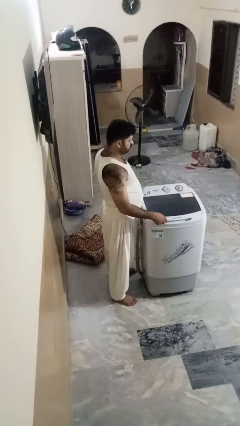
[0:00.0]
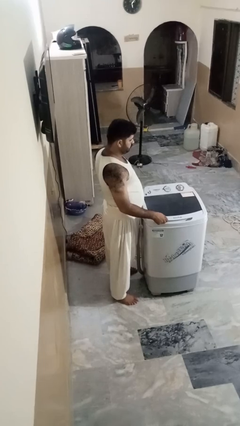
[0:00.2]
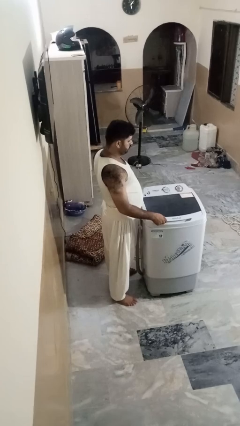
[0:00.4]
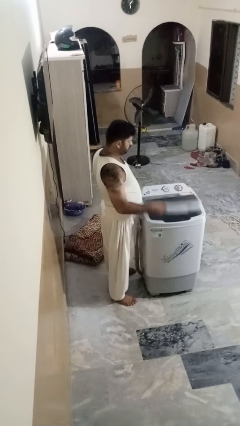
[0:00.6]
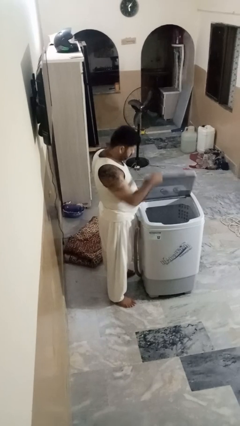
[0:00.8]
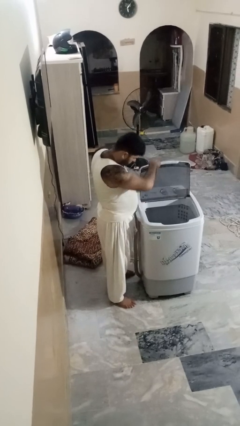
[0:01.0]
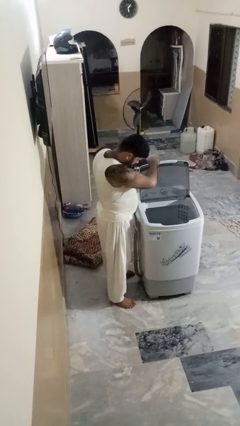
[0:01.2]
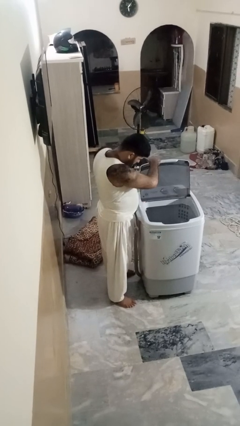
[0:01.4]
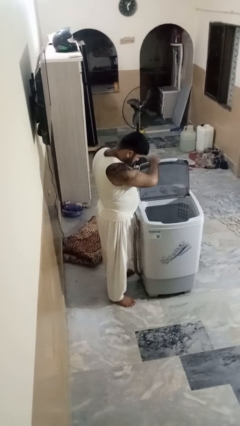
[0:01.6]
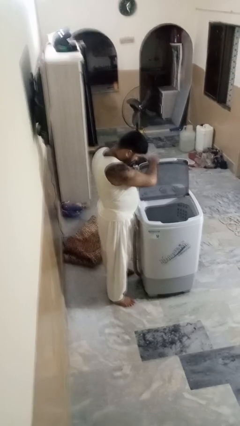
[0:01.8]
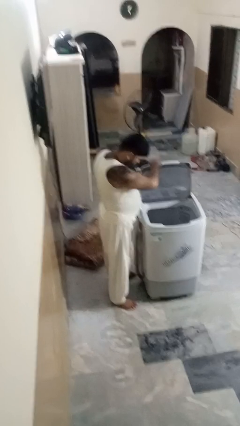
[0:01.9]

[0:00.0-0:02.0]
person opens clothes washer

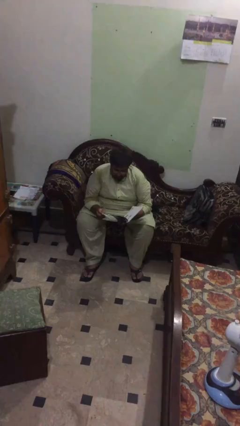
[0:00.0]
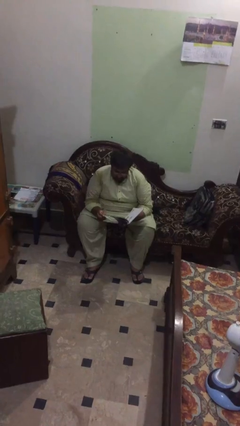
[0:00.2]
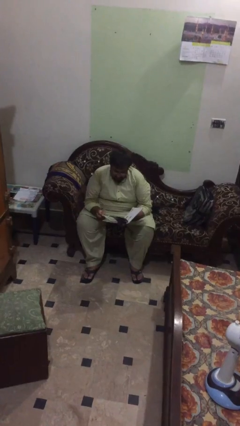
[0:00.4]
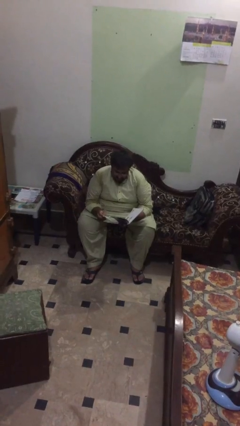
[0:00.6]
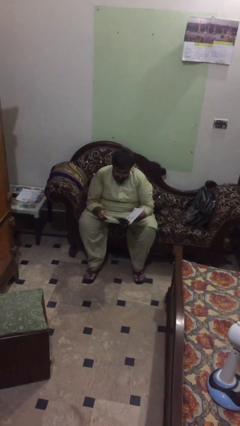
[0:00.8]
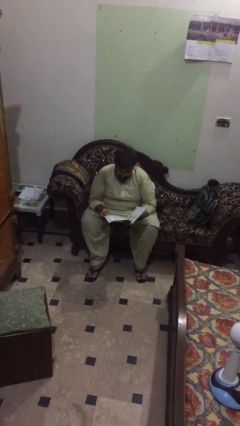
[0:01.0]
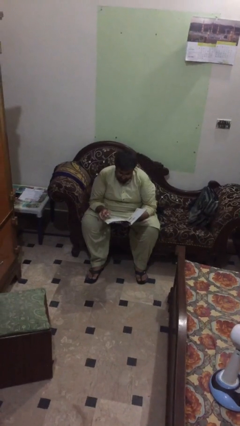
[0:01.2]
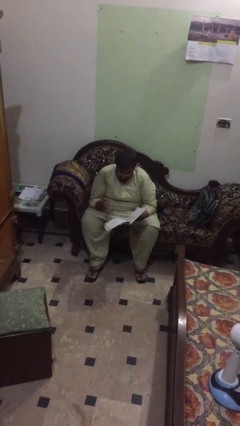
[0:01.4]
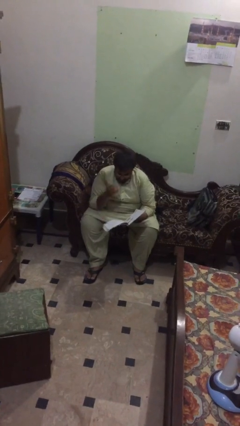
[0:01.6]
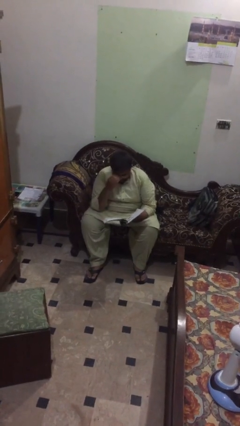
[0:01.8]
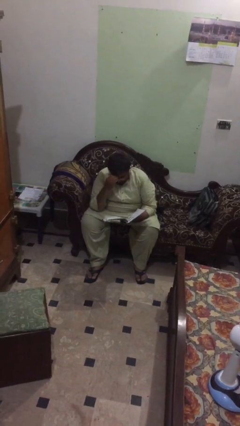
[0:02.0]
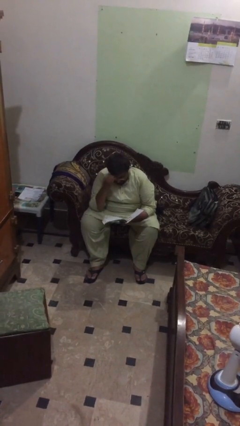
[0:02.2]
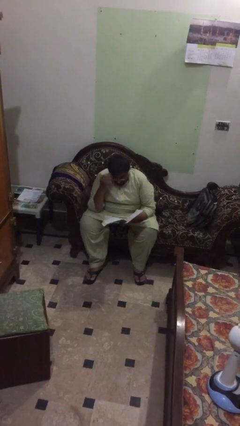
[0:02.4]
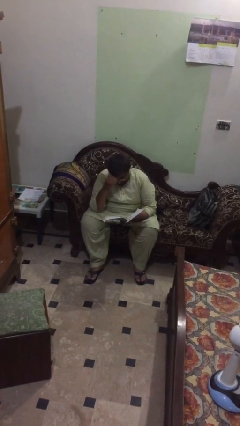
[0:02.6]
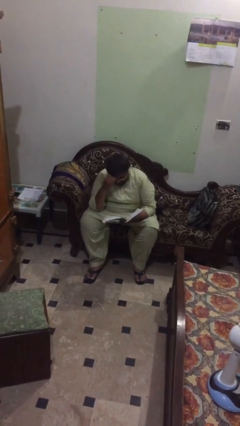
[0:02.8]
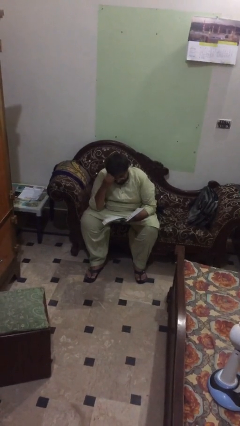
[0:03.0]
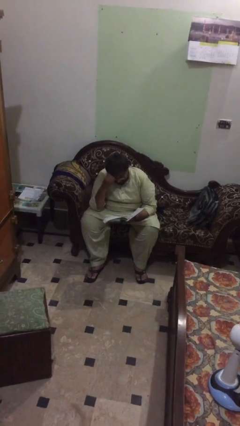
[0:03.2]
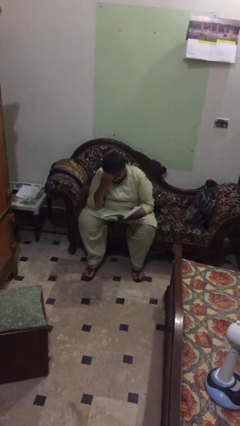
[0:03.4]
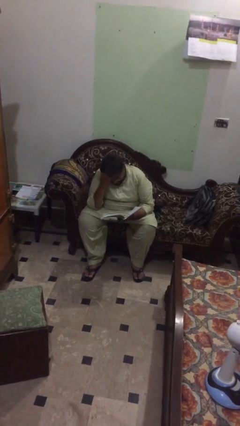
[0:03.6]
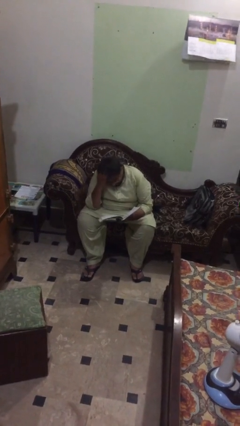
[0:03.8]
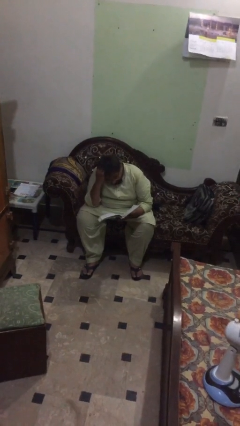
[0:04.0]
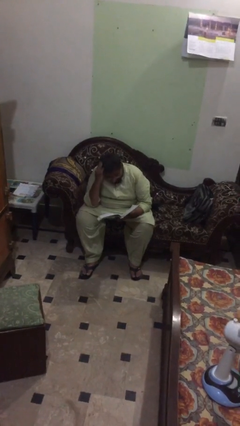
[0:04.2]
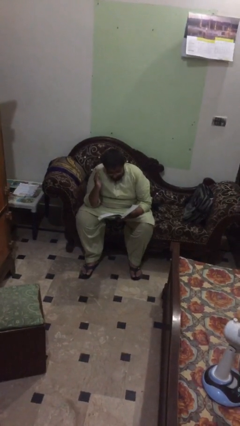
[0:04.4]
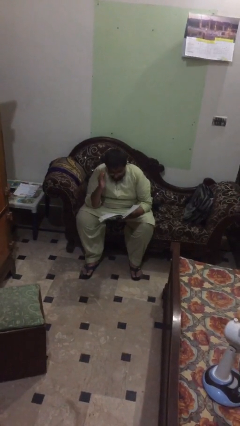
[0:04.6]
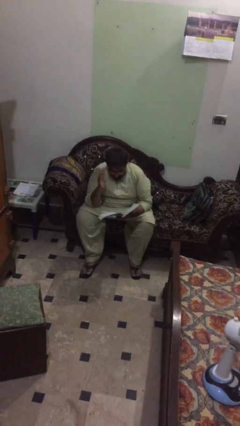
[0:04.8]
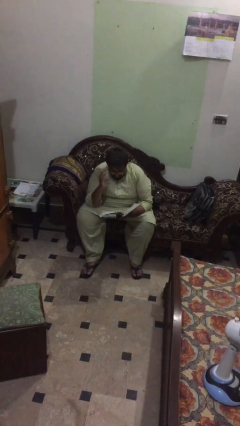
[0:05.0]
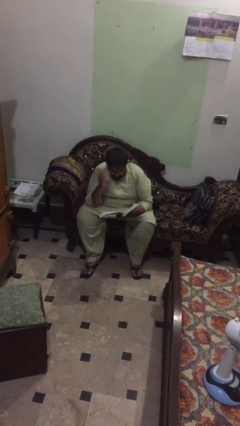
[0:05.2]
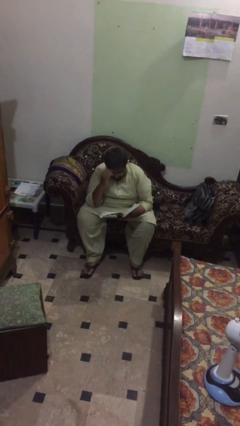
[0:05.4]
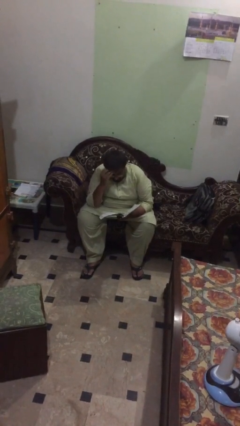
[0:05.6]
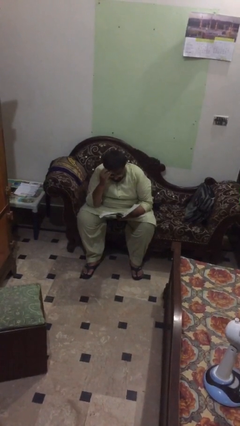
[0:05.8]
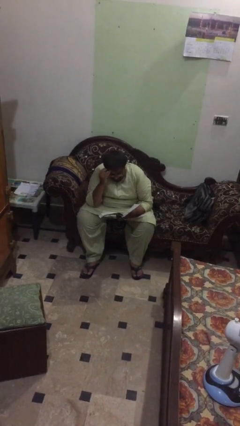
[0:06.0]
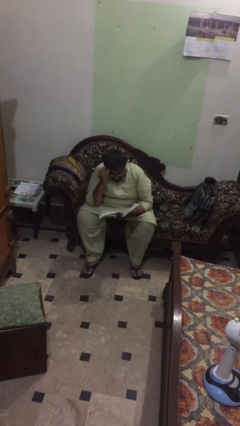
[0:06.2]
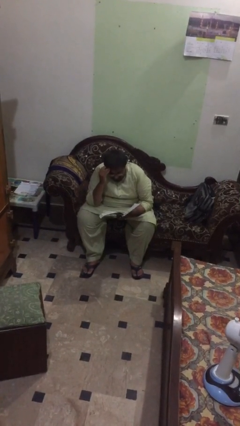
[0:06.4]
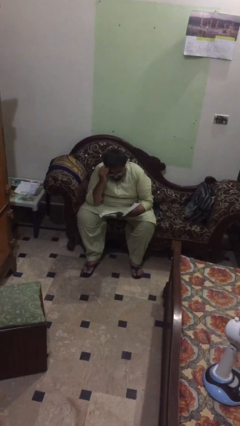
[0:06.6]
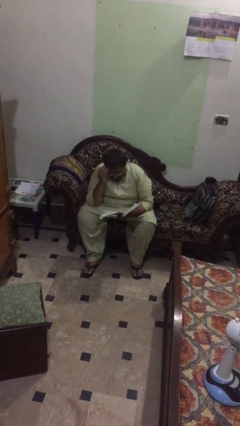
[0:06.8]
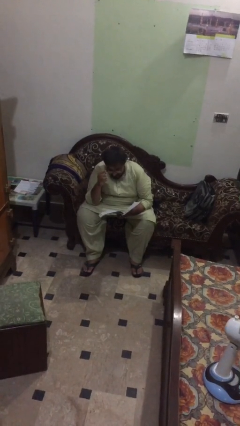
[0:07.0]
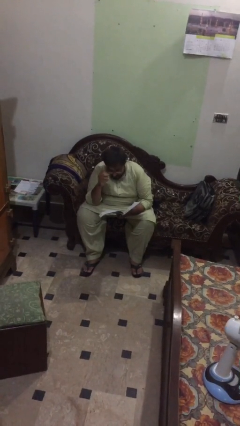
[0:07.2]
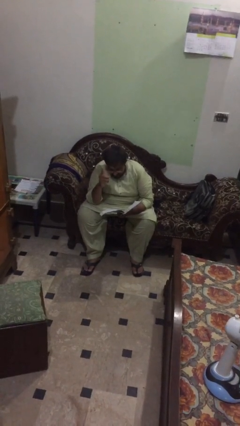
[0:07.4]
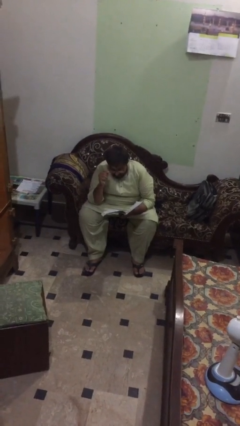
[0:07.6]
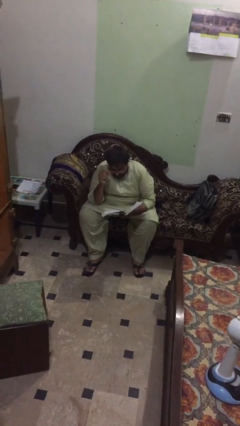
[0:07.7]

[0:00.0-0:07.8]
person reads document

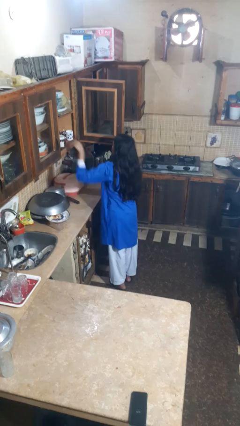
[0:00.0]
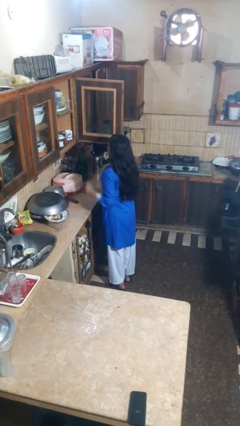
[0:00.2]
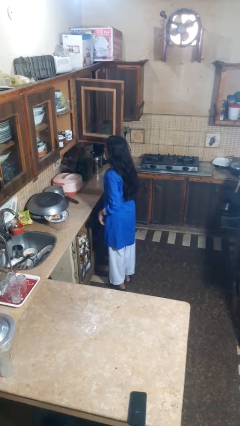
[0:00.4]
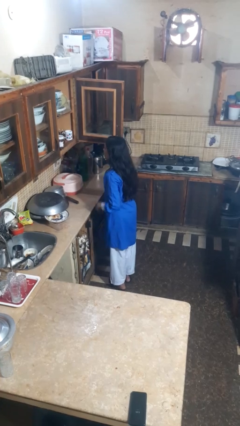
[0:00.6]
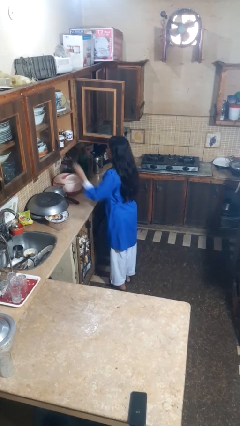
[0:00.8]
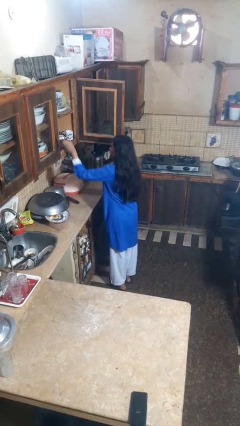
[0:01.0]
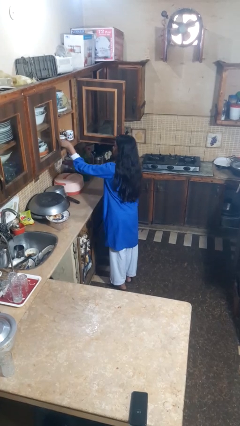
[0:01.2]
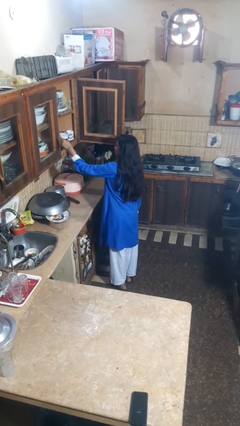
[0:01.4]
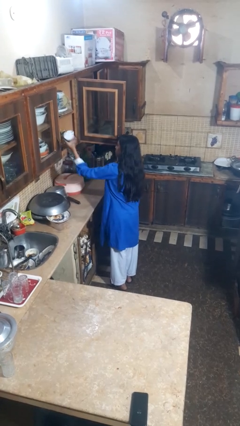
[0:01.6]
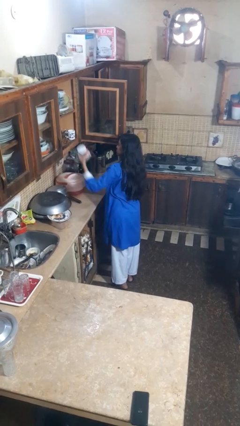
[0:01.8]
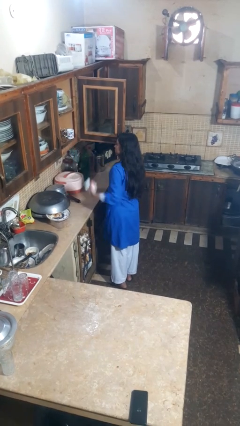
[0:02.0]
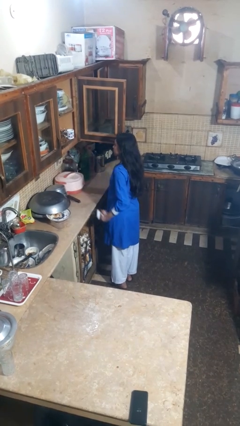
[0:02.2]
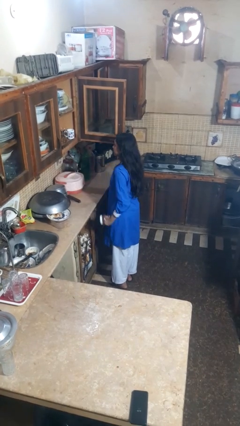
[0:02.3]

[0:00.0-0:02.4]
person takes object from cabinet

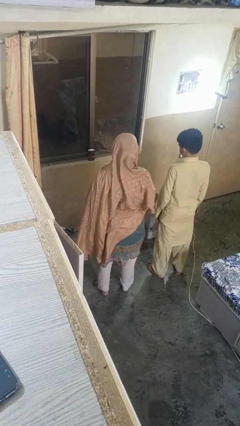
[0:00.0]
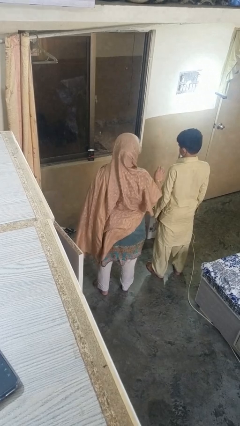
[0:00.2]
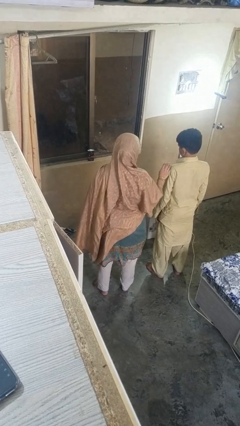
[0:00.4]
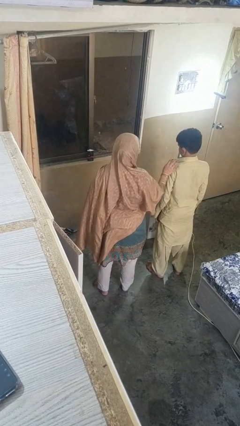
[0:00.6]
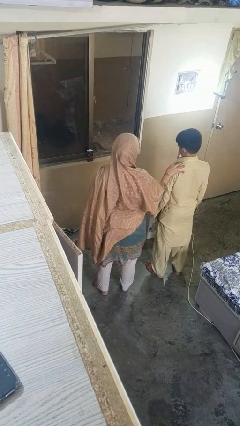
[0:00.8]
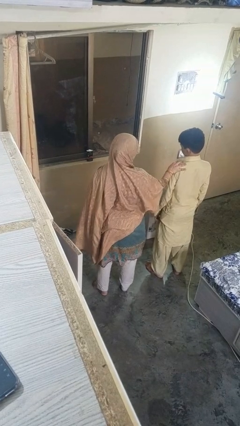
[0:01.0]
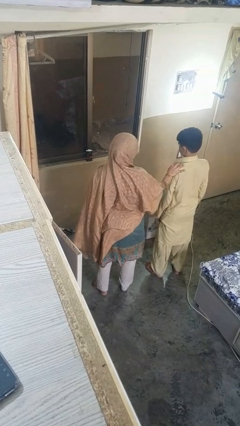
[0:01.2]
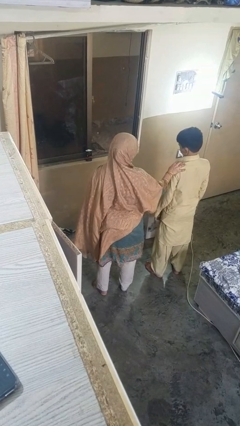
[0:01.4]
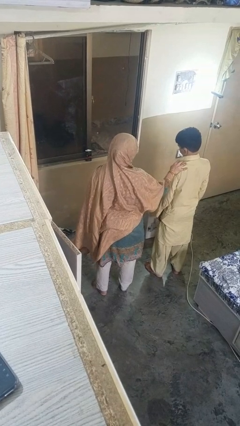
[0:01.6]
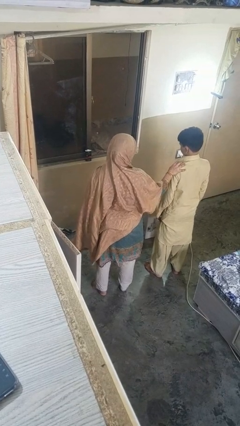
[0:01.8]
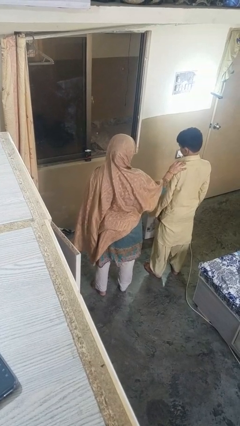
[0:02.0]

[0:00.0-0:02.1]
person shoves person

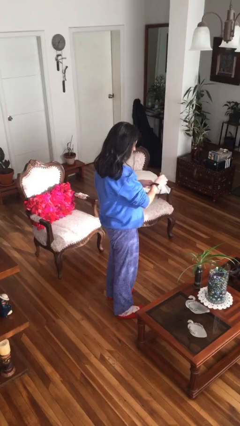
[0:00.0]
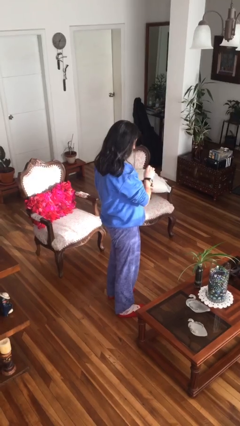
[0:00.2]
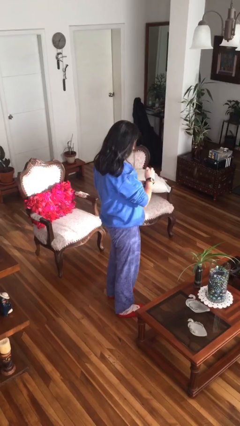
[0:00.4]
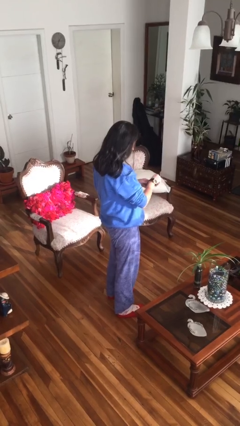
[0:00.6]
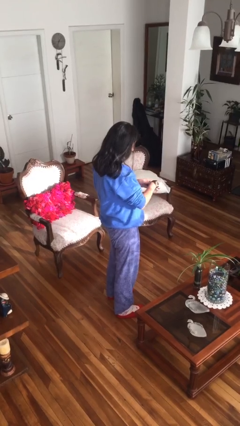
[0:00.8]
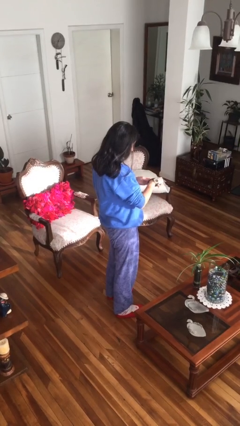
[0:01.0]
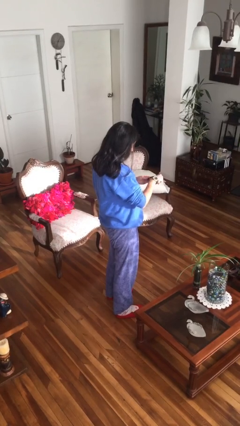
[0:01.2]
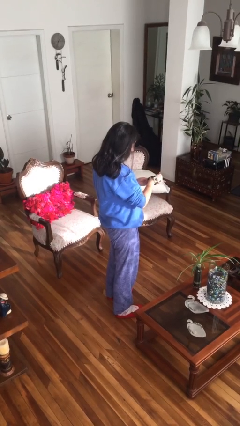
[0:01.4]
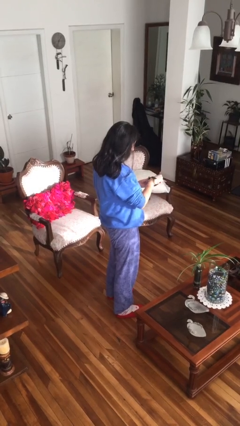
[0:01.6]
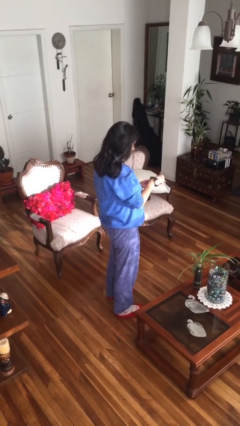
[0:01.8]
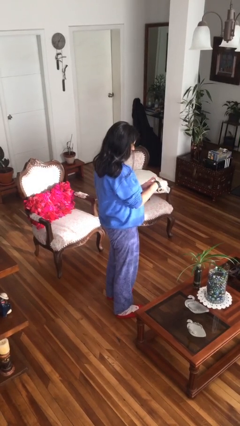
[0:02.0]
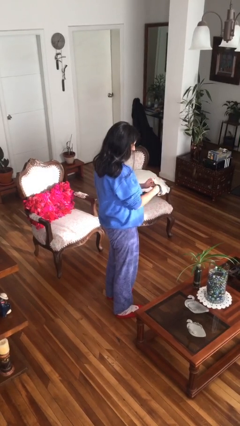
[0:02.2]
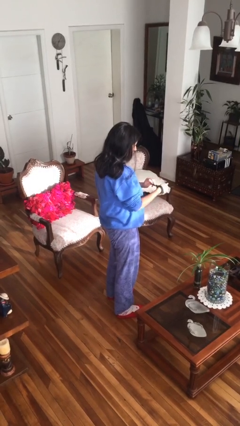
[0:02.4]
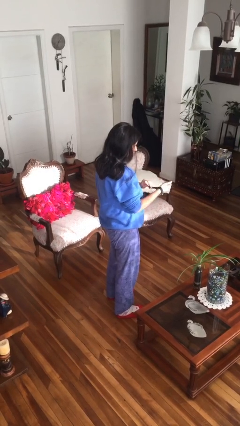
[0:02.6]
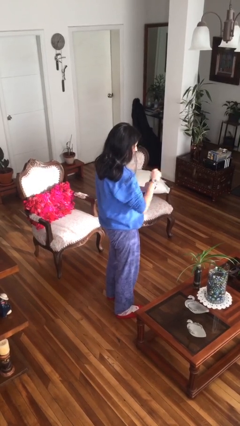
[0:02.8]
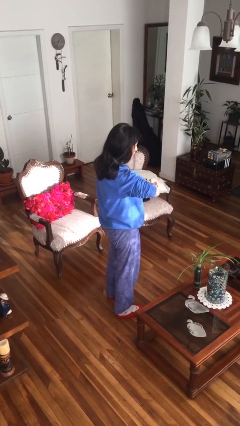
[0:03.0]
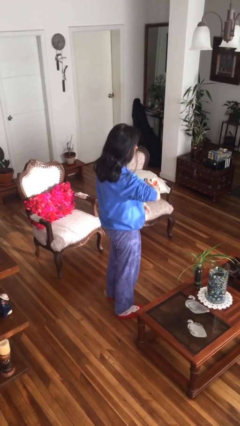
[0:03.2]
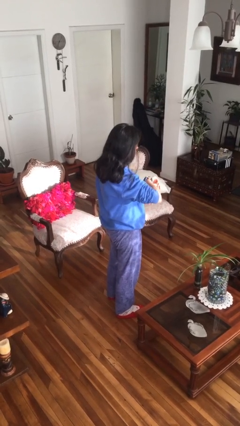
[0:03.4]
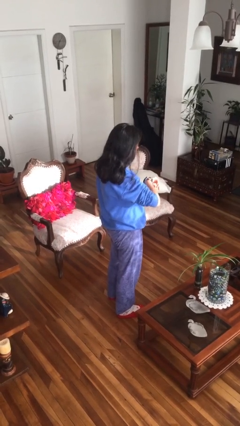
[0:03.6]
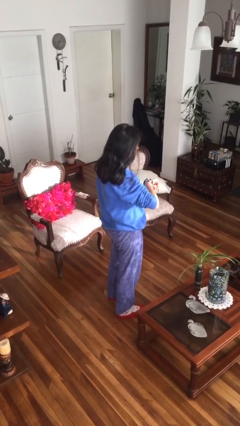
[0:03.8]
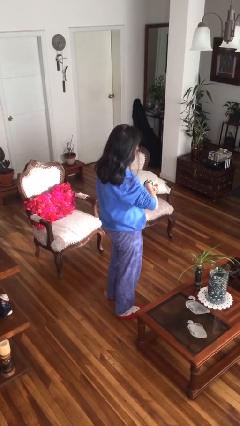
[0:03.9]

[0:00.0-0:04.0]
person puts on wristwatch
